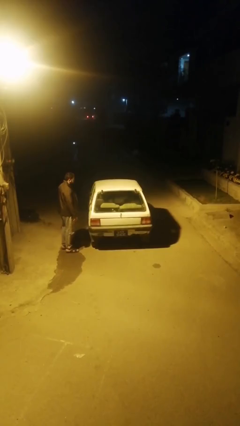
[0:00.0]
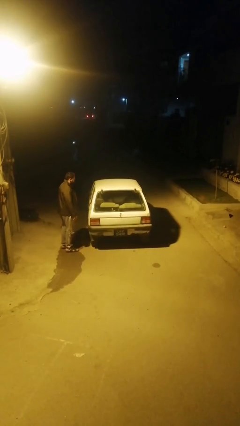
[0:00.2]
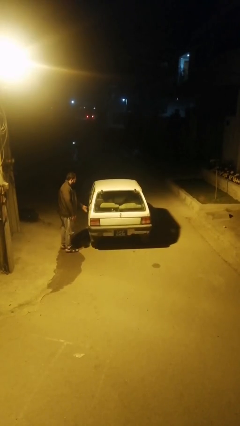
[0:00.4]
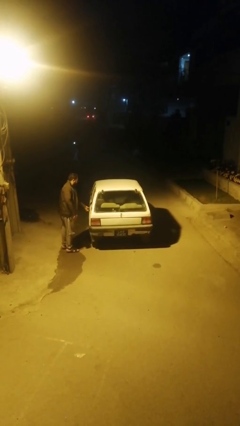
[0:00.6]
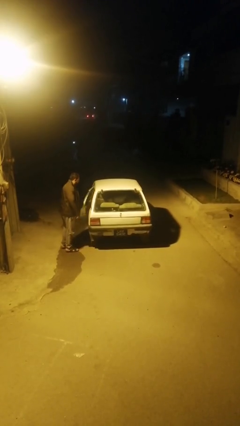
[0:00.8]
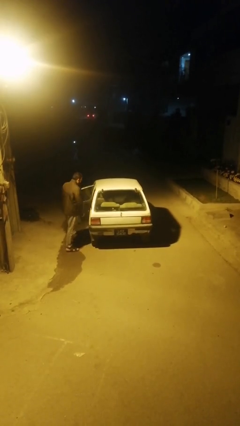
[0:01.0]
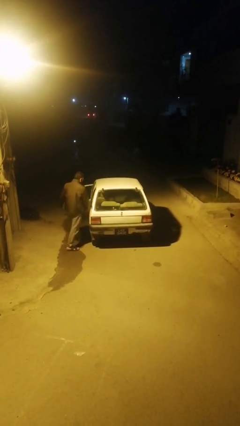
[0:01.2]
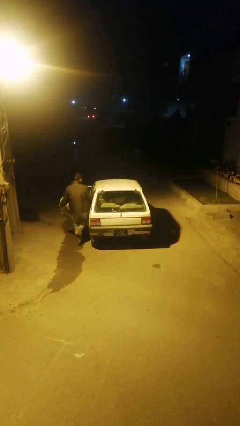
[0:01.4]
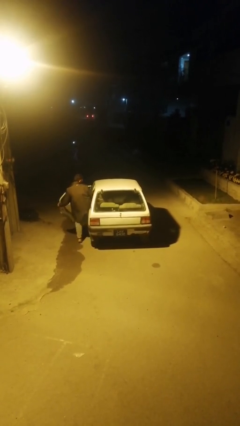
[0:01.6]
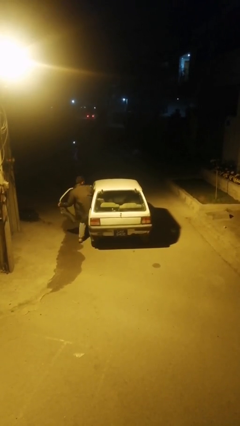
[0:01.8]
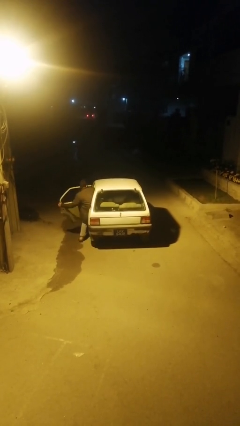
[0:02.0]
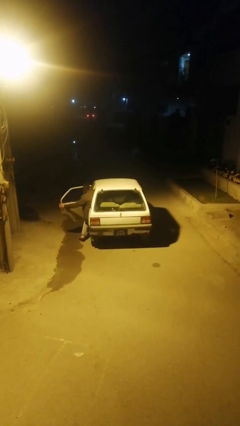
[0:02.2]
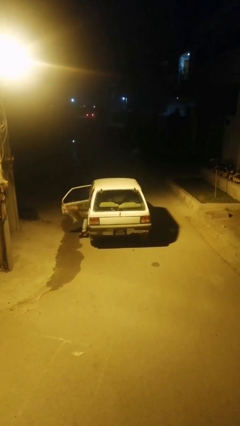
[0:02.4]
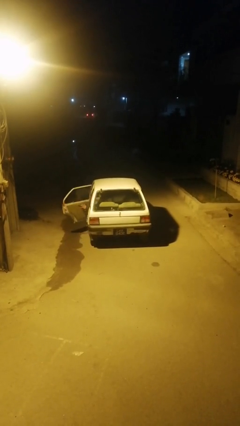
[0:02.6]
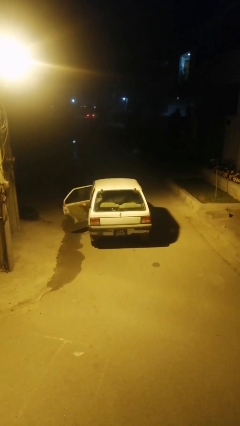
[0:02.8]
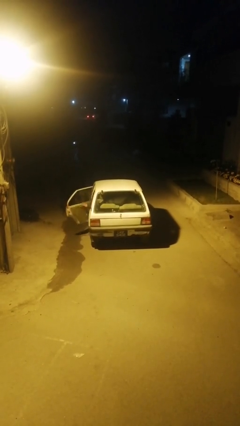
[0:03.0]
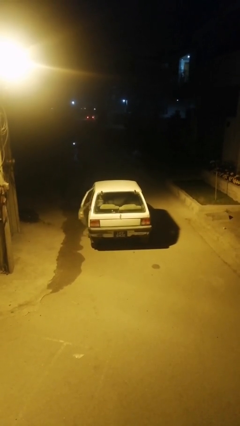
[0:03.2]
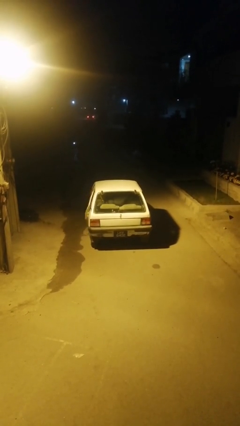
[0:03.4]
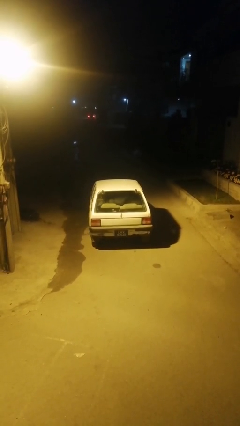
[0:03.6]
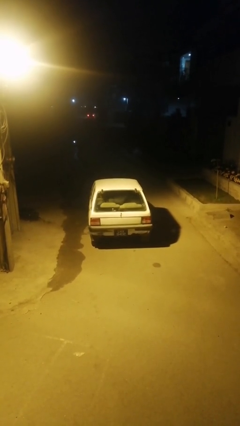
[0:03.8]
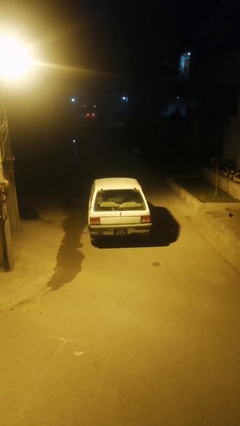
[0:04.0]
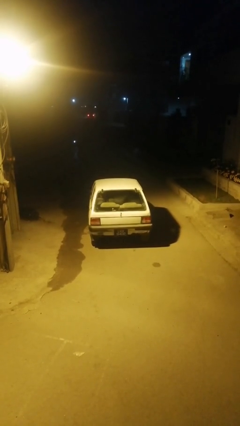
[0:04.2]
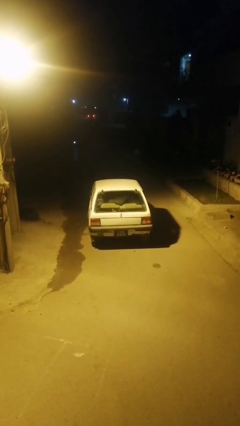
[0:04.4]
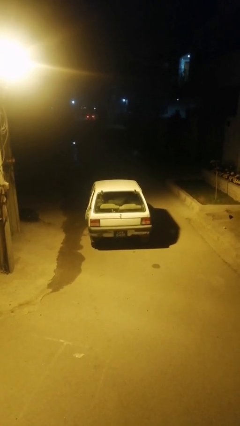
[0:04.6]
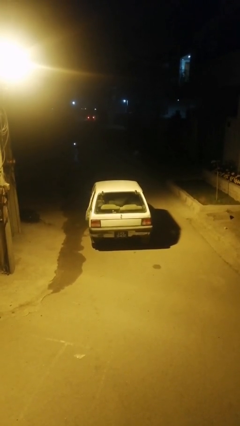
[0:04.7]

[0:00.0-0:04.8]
car picks up person

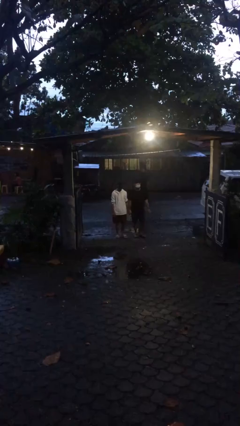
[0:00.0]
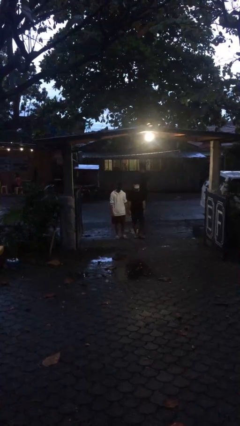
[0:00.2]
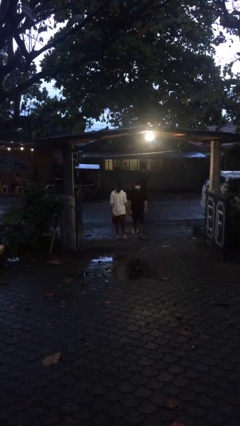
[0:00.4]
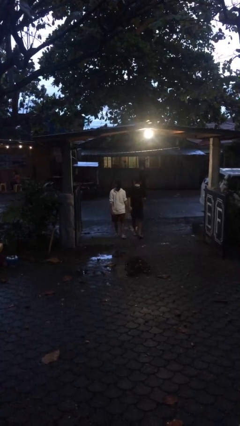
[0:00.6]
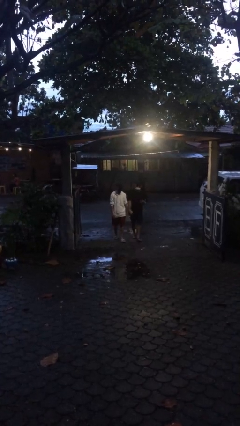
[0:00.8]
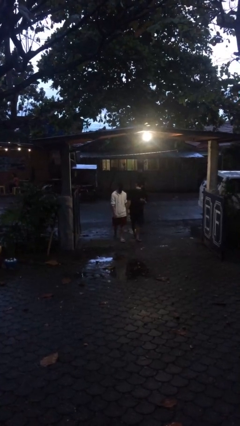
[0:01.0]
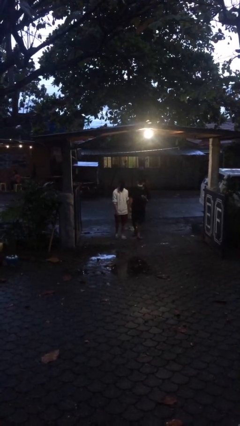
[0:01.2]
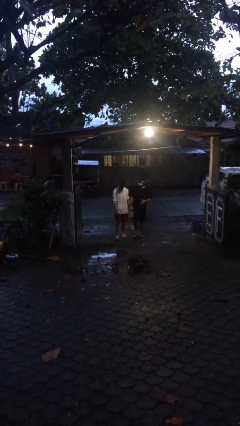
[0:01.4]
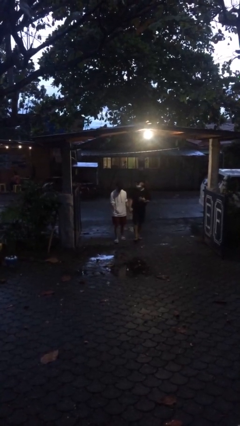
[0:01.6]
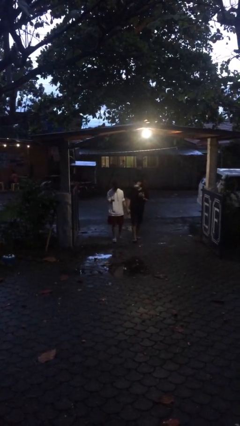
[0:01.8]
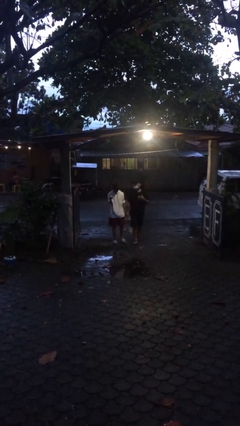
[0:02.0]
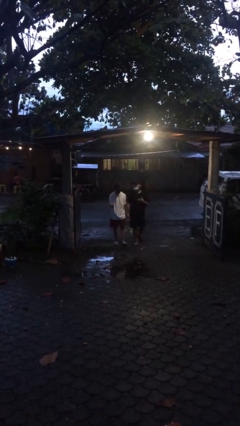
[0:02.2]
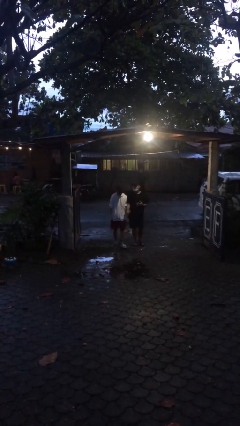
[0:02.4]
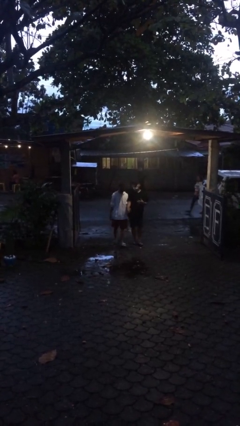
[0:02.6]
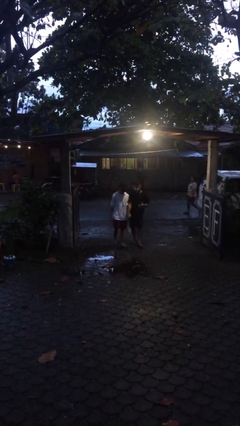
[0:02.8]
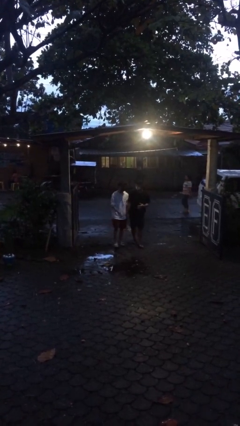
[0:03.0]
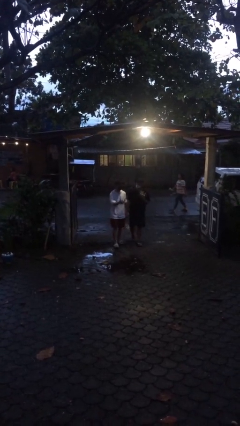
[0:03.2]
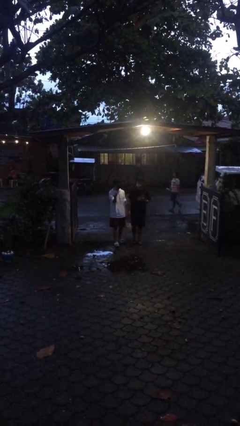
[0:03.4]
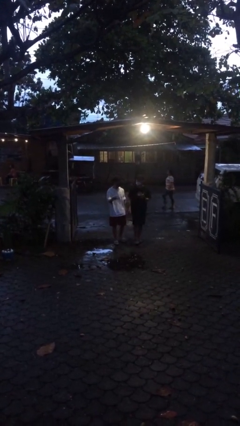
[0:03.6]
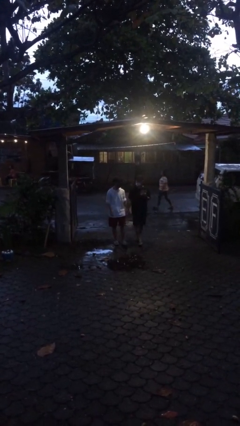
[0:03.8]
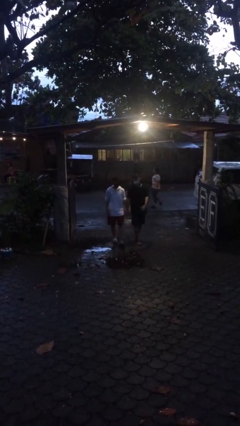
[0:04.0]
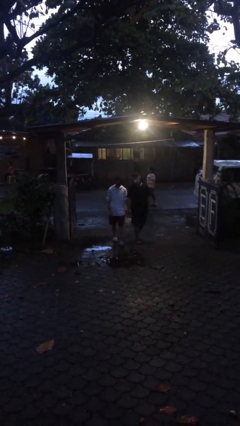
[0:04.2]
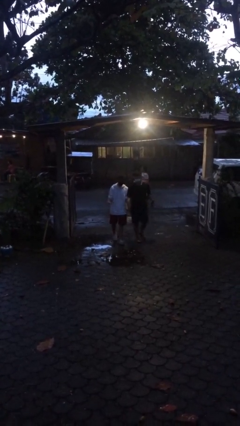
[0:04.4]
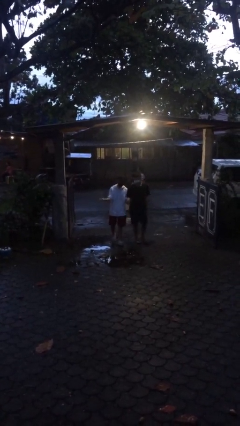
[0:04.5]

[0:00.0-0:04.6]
person holds hand

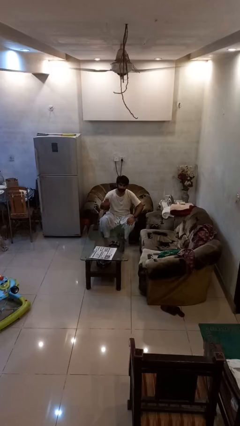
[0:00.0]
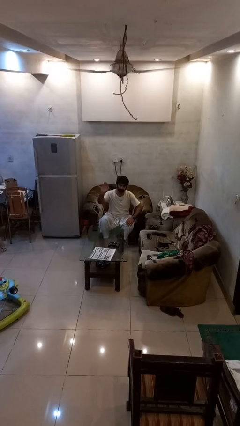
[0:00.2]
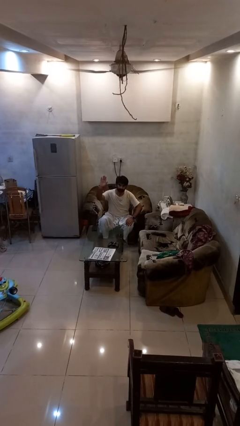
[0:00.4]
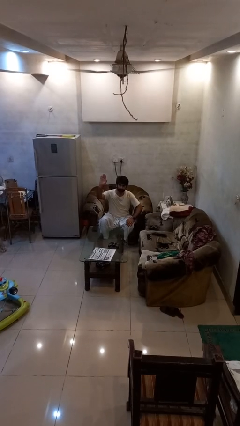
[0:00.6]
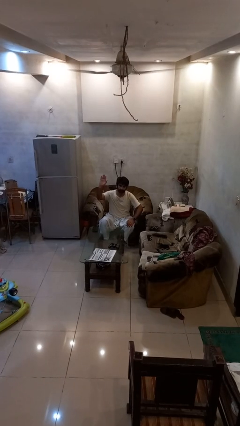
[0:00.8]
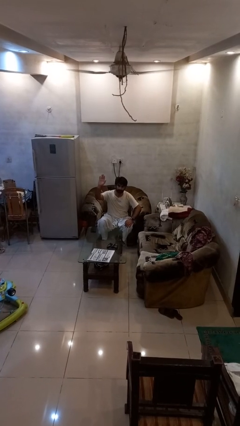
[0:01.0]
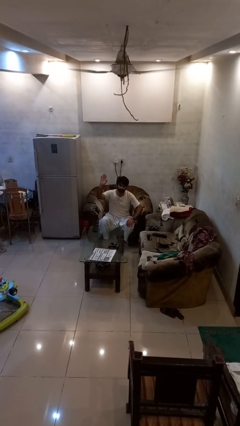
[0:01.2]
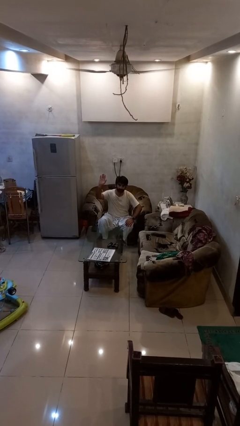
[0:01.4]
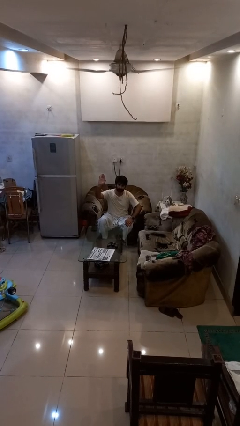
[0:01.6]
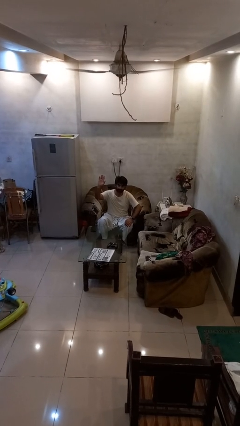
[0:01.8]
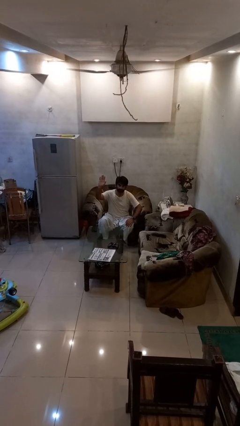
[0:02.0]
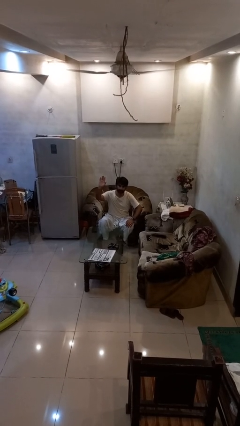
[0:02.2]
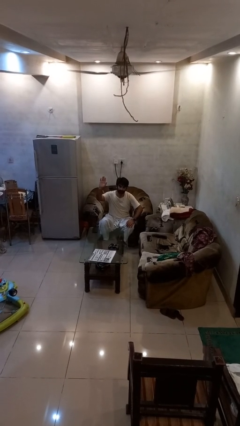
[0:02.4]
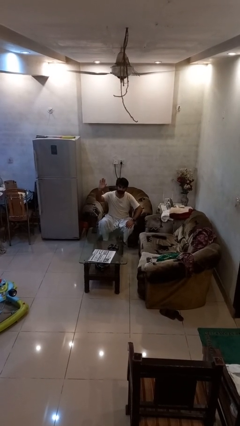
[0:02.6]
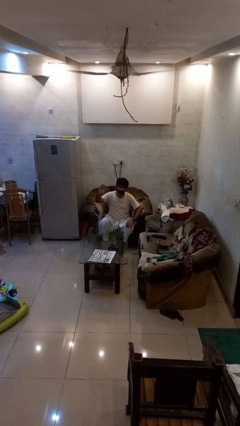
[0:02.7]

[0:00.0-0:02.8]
person gestures raise hand

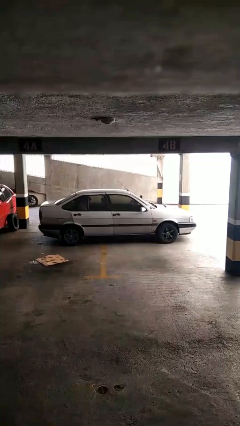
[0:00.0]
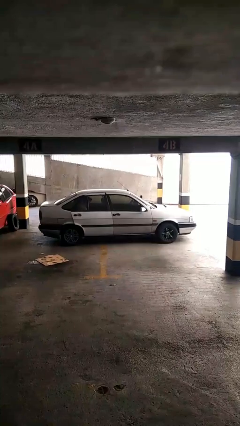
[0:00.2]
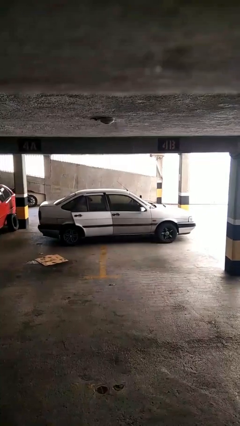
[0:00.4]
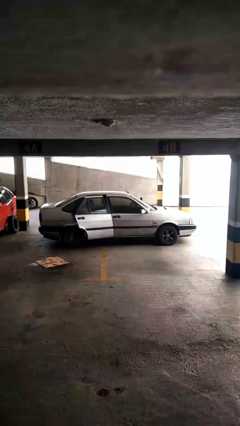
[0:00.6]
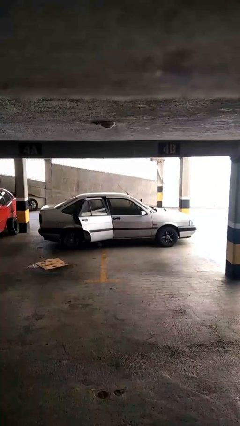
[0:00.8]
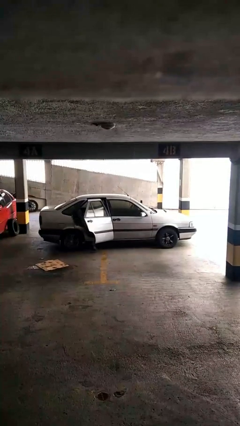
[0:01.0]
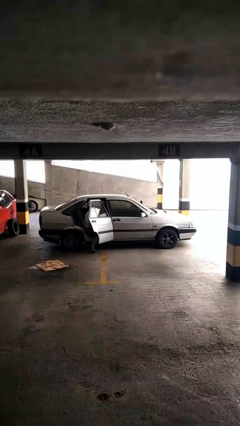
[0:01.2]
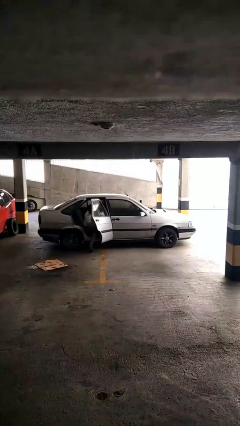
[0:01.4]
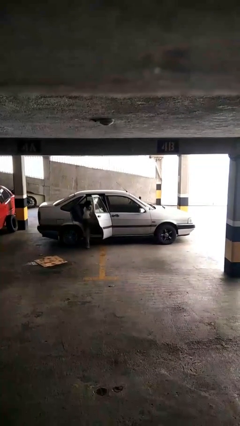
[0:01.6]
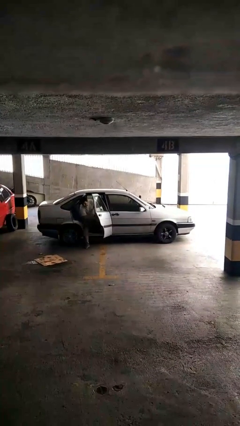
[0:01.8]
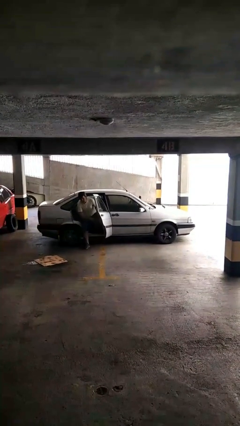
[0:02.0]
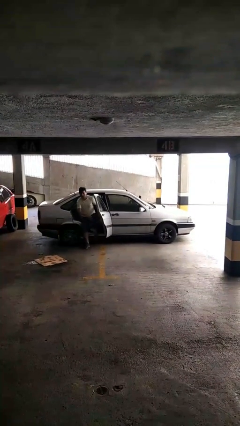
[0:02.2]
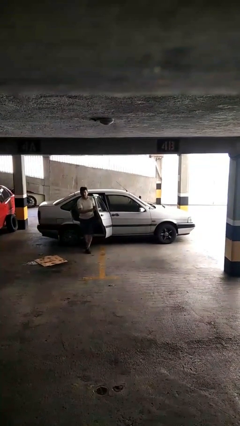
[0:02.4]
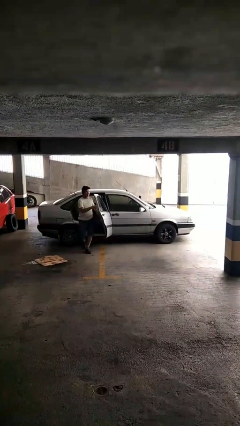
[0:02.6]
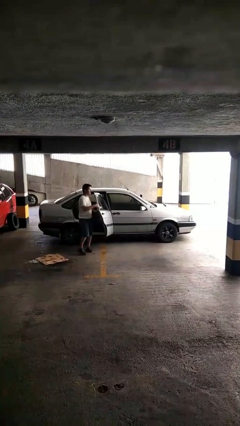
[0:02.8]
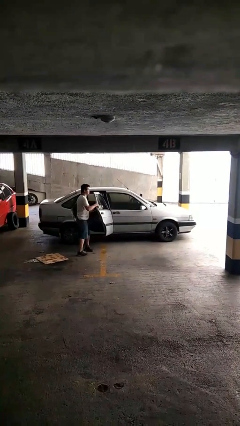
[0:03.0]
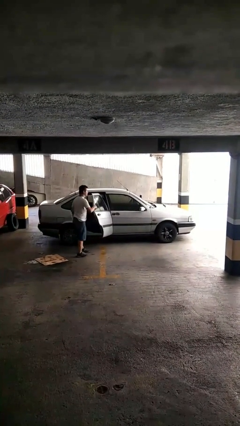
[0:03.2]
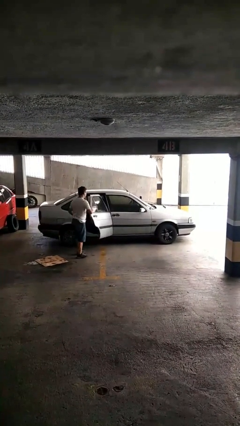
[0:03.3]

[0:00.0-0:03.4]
car drops off person

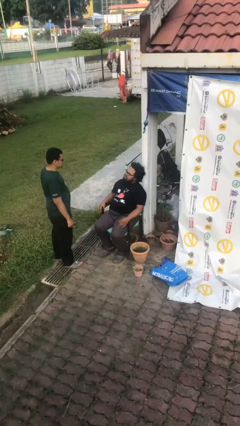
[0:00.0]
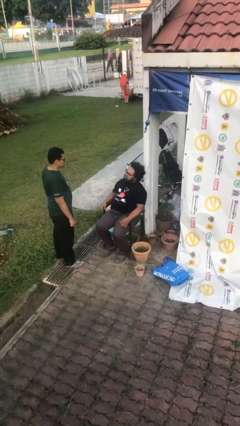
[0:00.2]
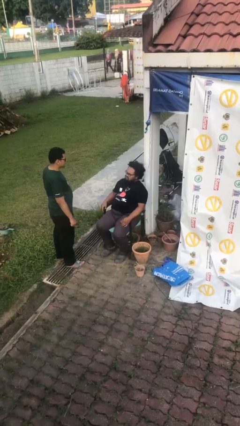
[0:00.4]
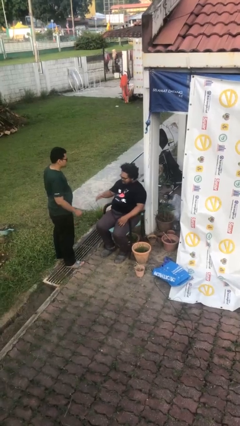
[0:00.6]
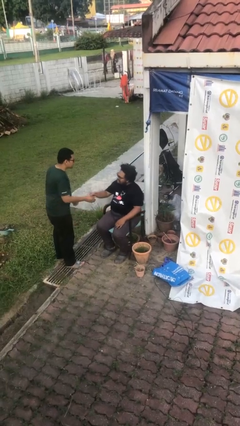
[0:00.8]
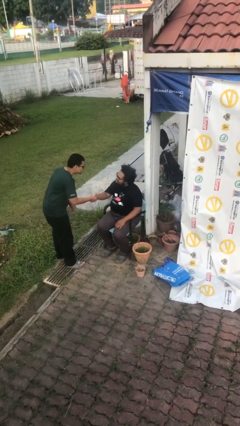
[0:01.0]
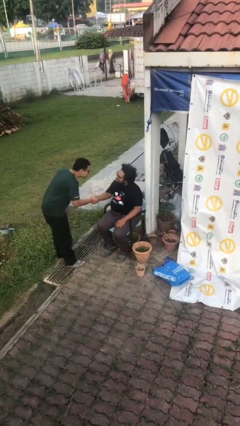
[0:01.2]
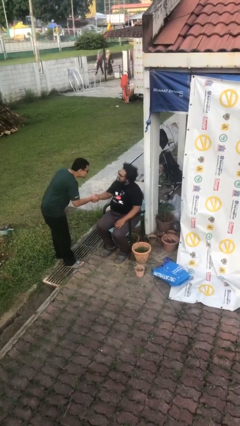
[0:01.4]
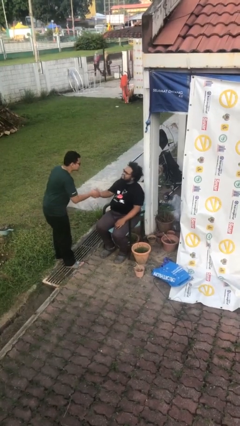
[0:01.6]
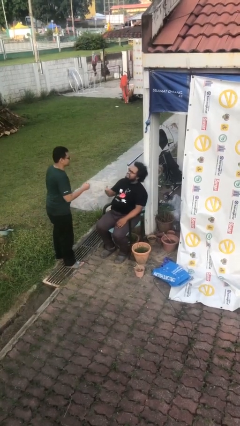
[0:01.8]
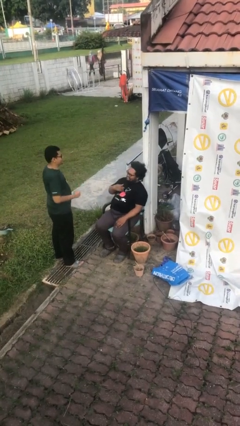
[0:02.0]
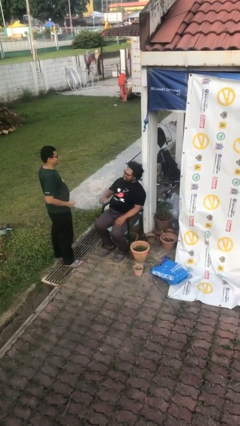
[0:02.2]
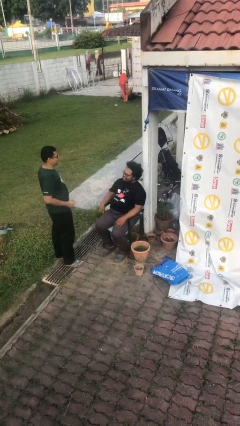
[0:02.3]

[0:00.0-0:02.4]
person shakes hand
